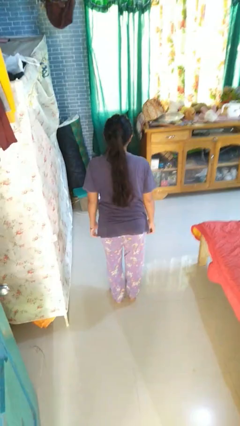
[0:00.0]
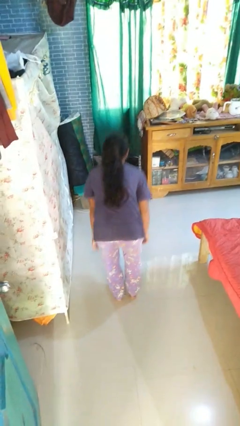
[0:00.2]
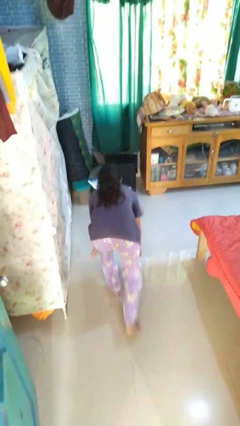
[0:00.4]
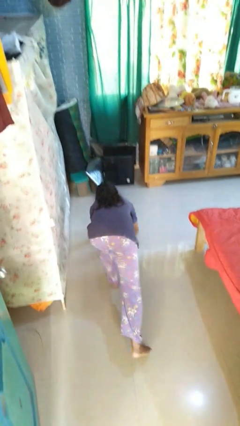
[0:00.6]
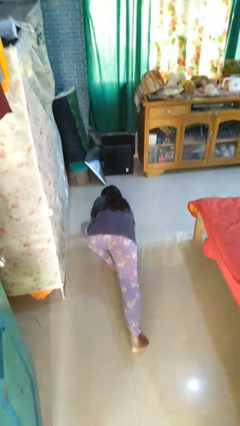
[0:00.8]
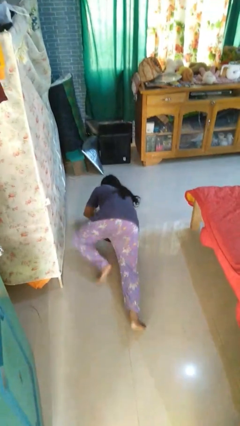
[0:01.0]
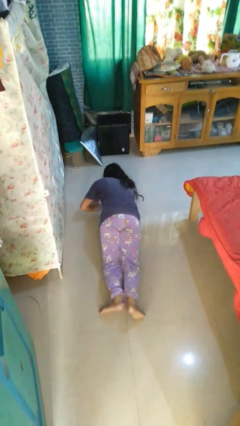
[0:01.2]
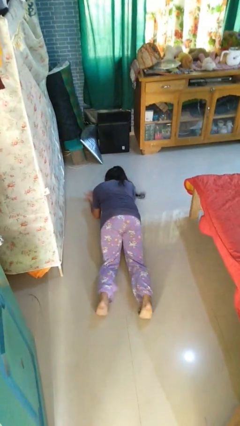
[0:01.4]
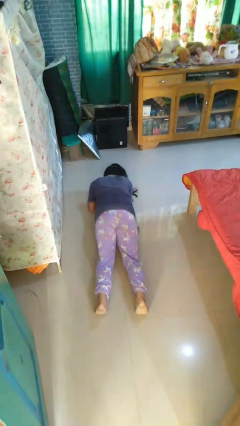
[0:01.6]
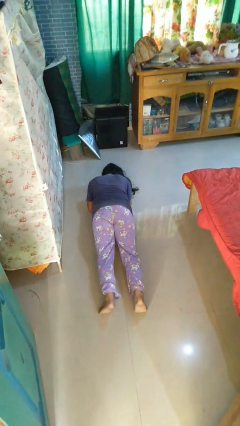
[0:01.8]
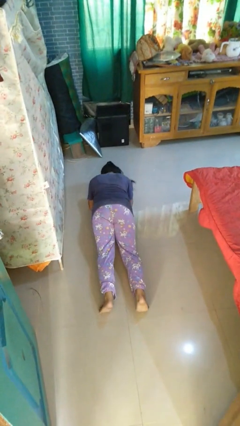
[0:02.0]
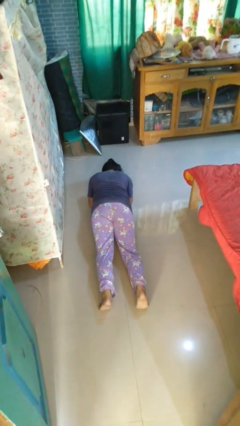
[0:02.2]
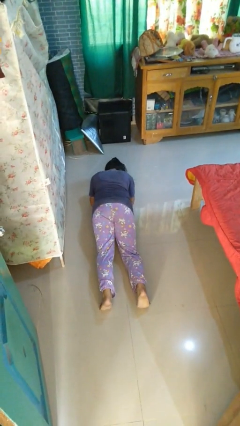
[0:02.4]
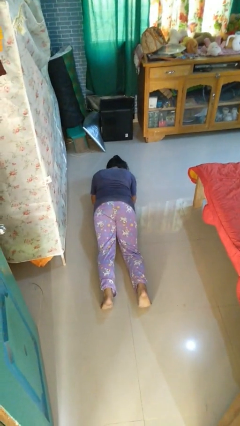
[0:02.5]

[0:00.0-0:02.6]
person exercises with plank

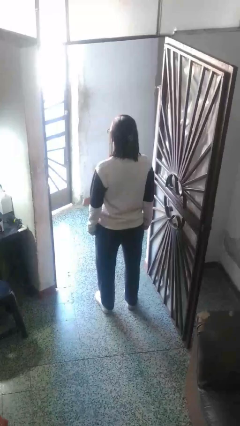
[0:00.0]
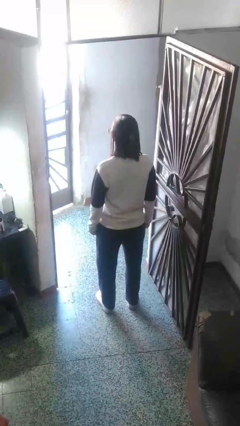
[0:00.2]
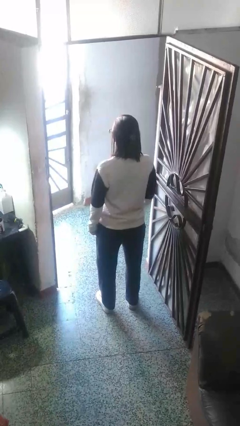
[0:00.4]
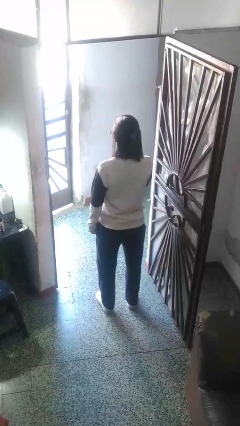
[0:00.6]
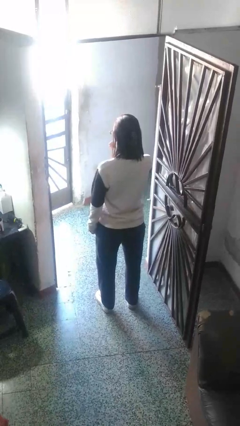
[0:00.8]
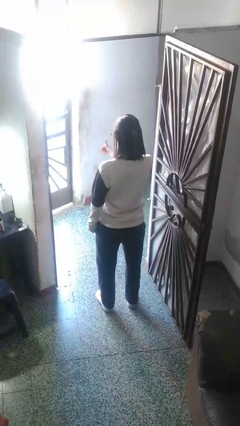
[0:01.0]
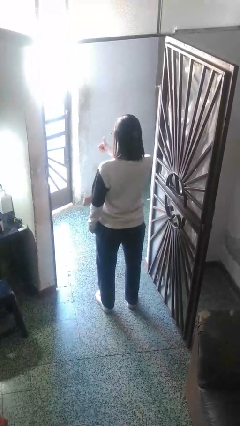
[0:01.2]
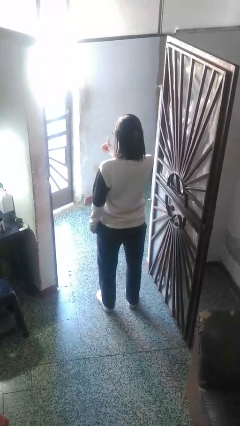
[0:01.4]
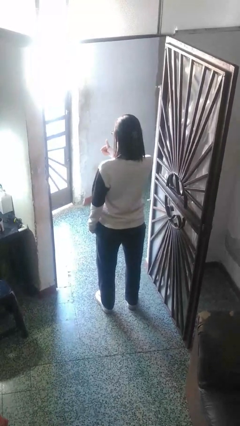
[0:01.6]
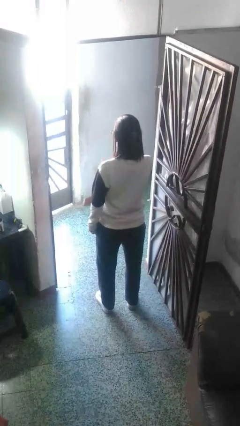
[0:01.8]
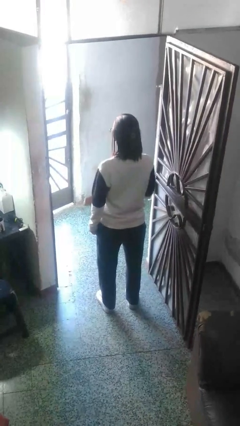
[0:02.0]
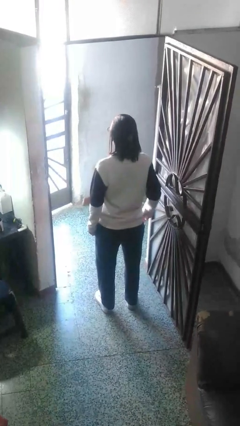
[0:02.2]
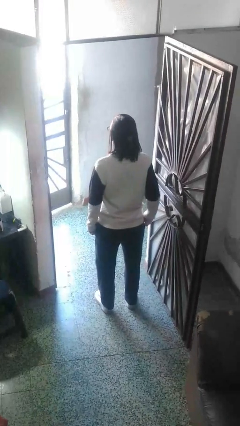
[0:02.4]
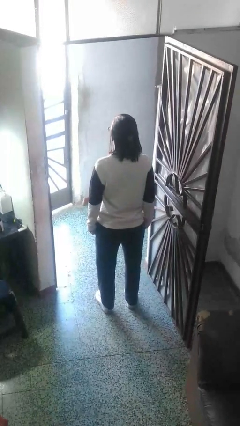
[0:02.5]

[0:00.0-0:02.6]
person gestures thumbs up

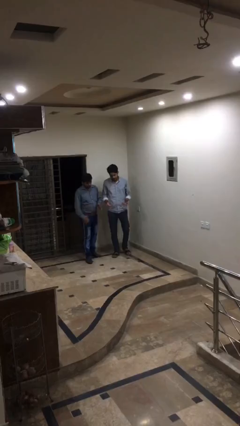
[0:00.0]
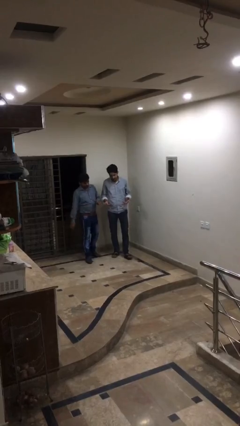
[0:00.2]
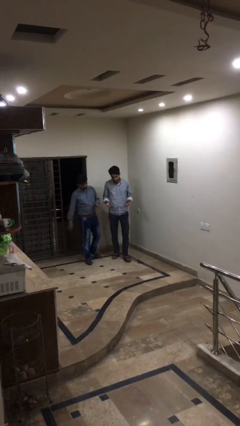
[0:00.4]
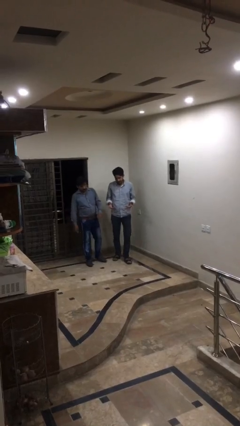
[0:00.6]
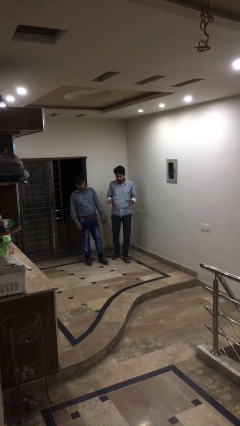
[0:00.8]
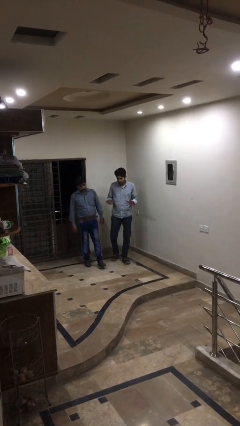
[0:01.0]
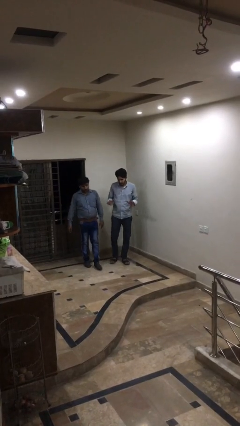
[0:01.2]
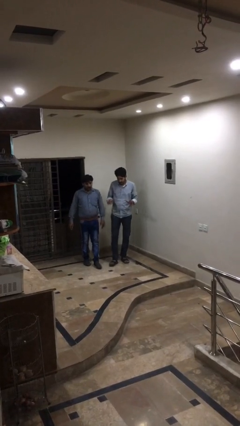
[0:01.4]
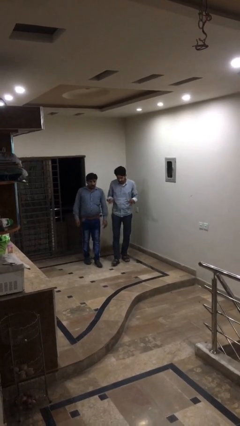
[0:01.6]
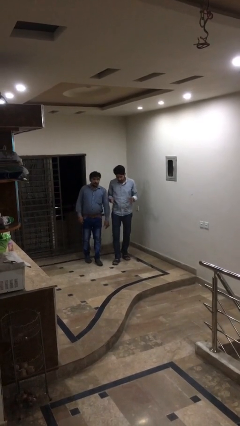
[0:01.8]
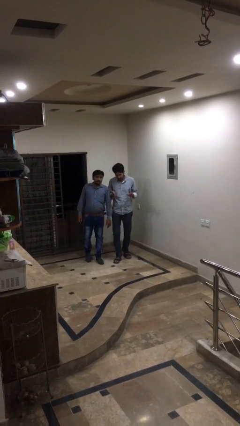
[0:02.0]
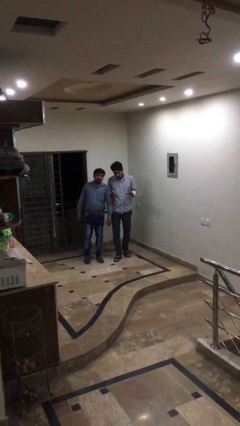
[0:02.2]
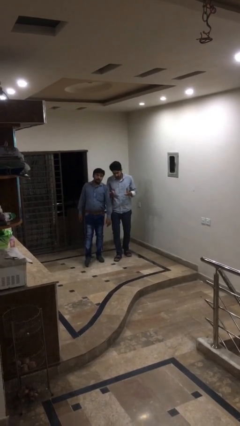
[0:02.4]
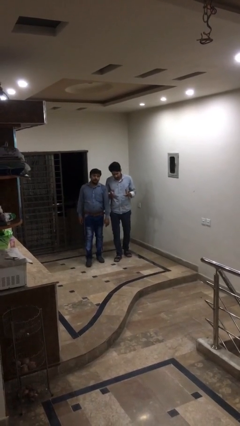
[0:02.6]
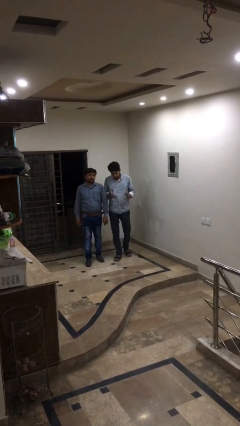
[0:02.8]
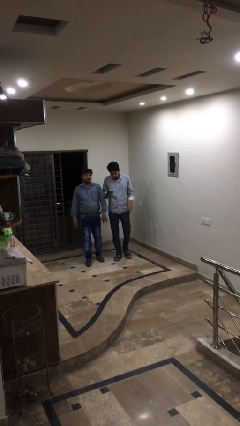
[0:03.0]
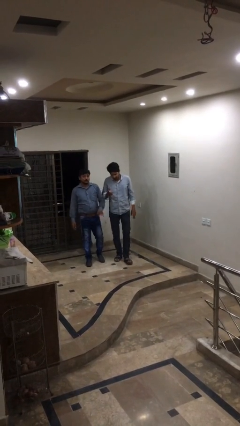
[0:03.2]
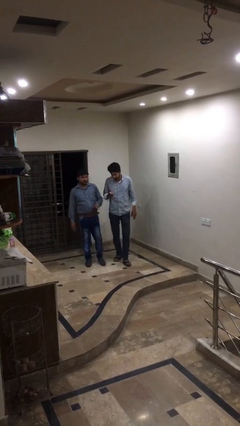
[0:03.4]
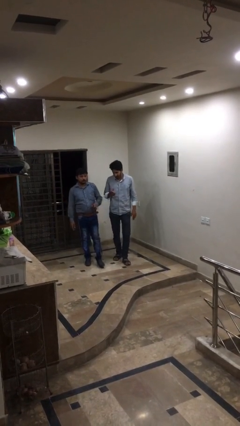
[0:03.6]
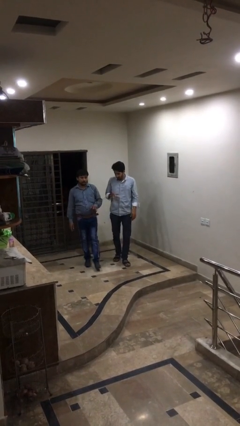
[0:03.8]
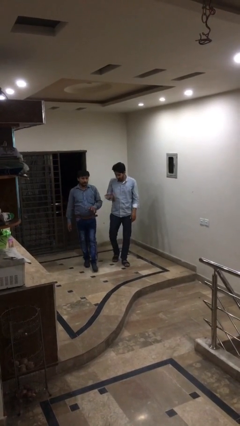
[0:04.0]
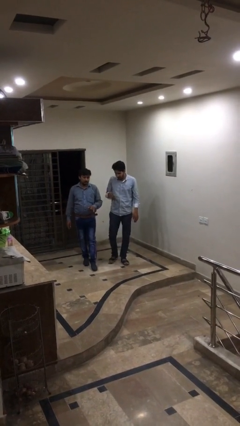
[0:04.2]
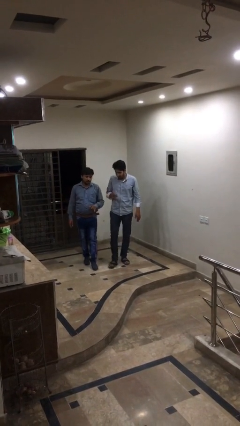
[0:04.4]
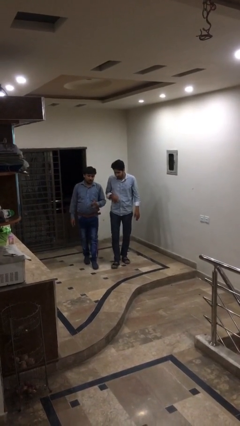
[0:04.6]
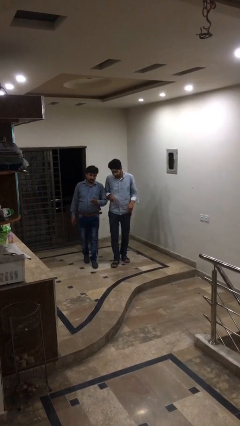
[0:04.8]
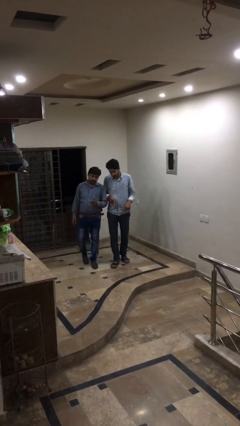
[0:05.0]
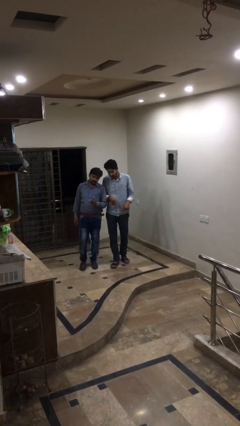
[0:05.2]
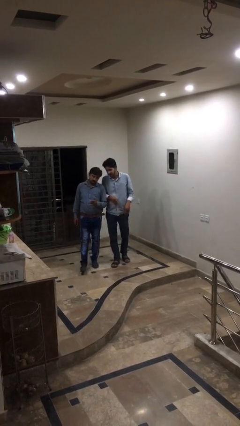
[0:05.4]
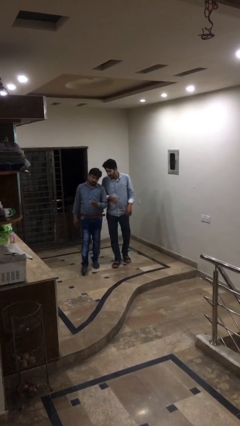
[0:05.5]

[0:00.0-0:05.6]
person talks to person

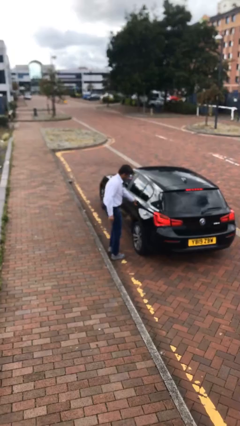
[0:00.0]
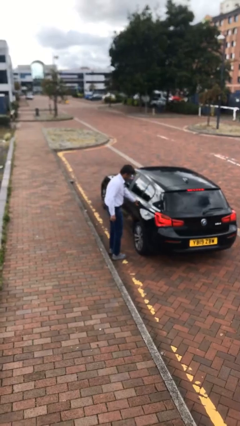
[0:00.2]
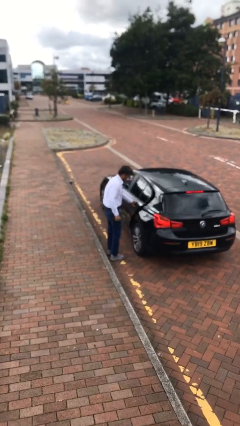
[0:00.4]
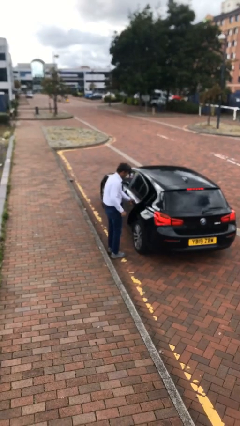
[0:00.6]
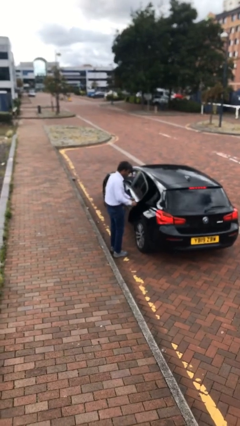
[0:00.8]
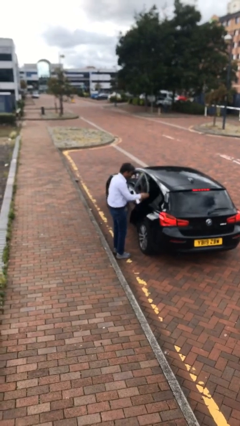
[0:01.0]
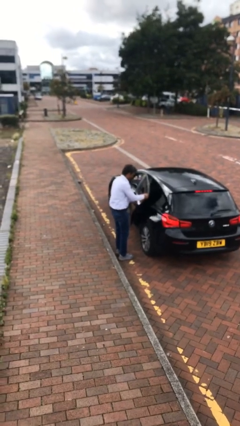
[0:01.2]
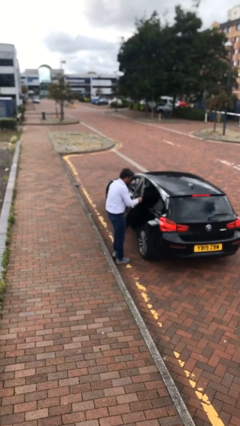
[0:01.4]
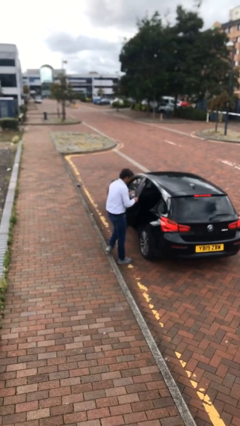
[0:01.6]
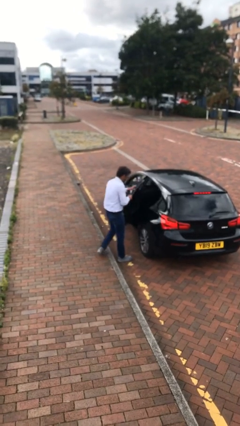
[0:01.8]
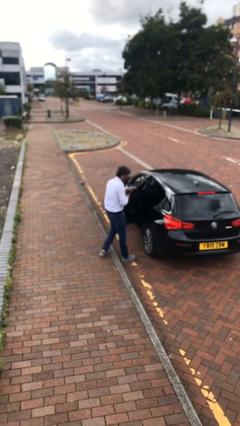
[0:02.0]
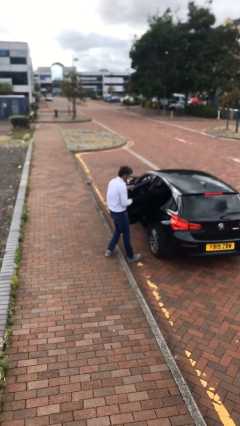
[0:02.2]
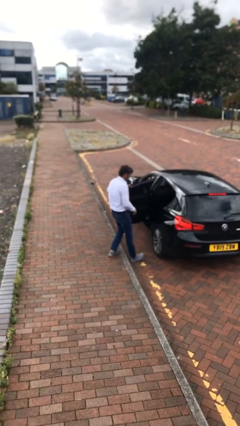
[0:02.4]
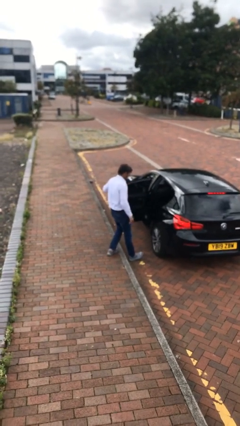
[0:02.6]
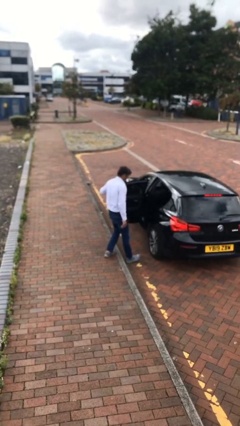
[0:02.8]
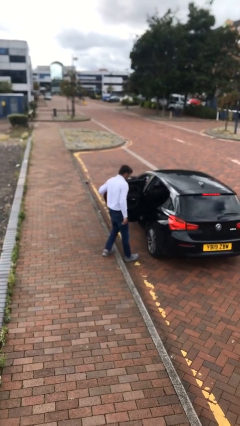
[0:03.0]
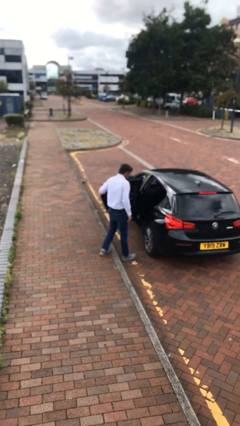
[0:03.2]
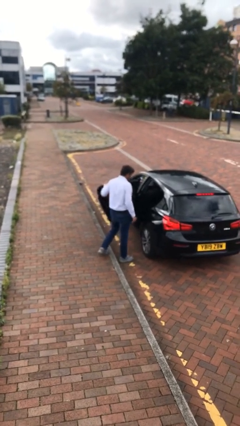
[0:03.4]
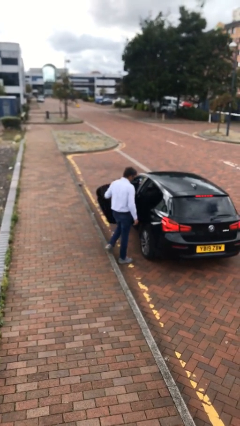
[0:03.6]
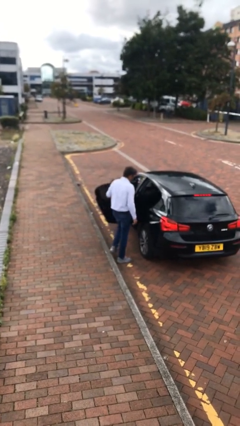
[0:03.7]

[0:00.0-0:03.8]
person opens car door

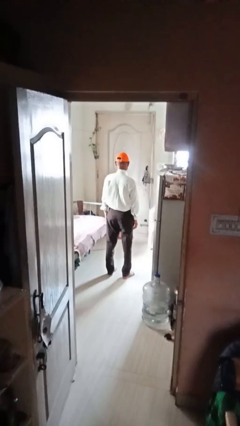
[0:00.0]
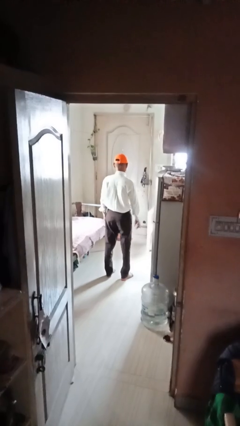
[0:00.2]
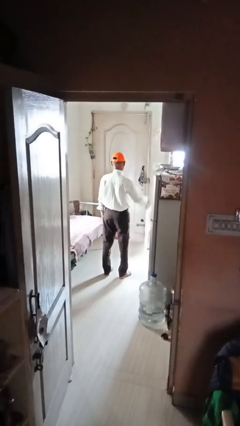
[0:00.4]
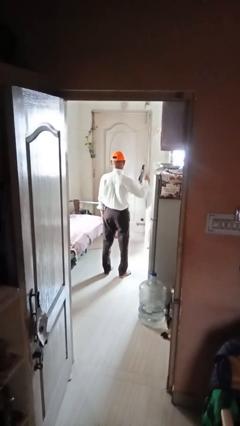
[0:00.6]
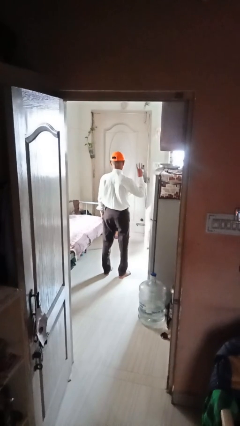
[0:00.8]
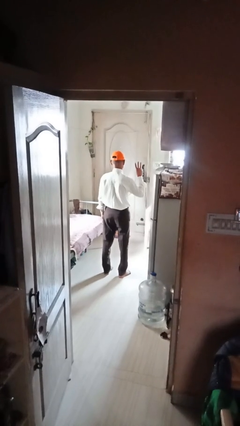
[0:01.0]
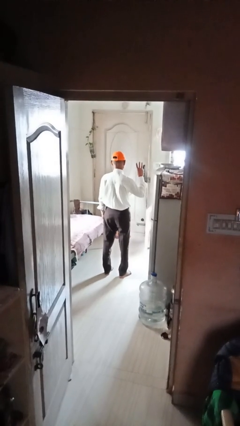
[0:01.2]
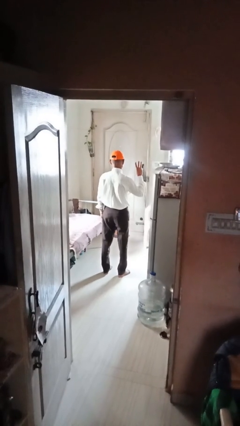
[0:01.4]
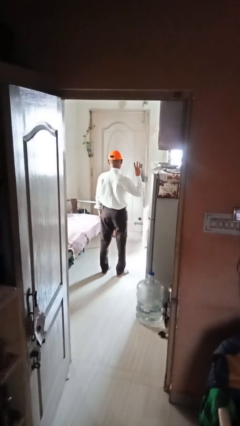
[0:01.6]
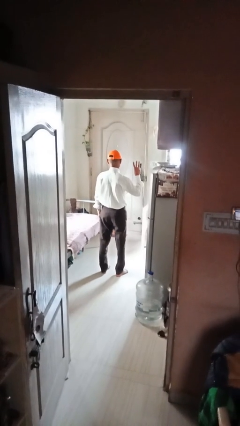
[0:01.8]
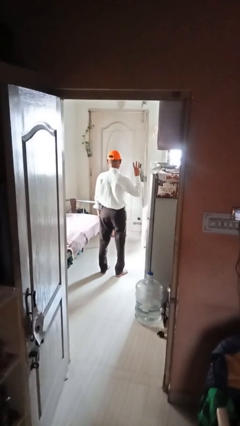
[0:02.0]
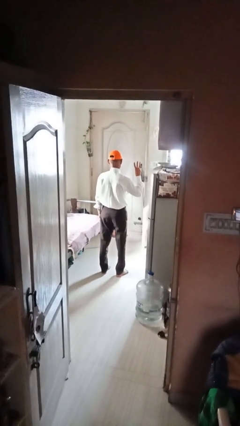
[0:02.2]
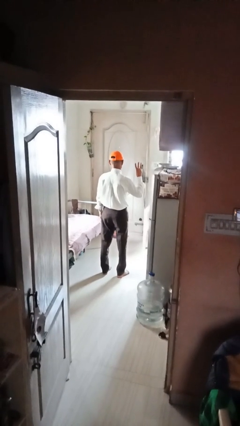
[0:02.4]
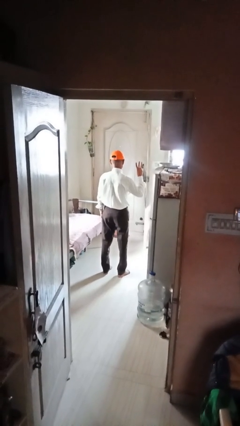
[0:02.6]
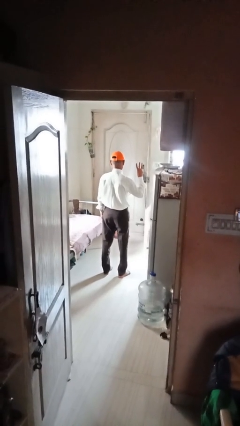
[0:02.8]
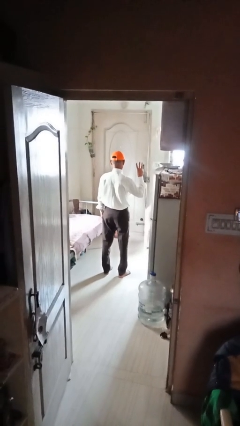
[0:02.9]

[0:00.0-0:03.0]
person gestures number three

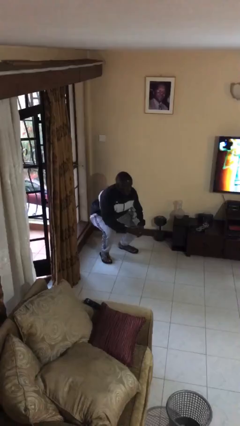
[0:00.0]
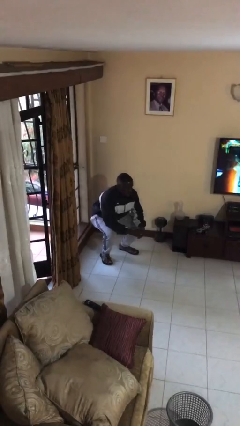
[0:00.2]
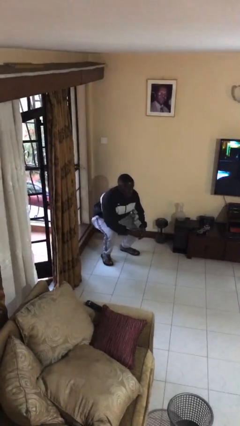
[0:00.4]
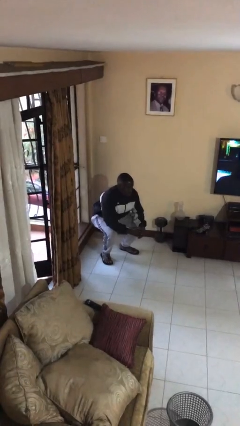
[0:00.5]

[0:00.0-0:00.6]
person stands up
